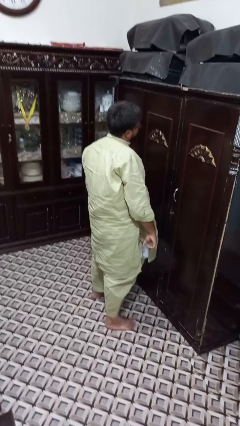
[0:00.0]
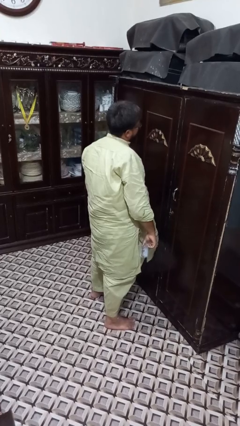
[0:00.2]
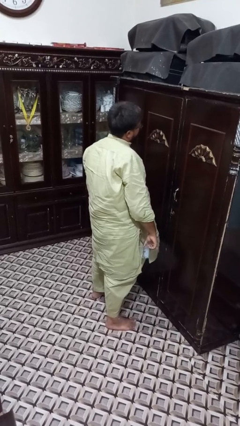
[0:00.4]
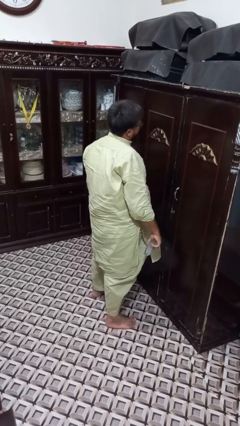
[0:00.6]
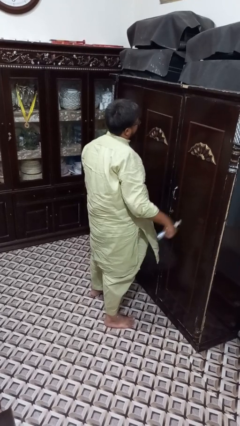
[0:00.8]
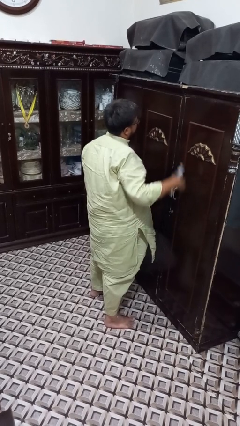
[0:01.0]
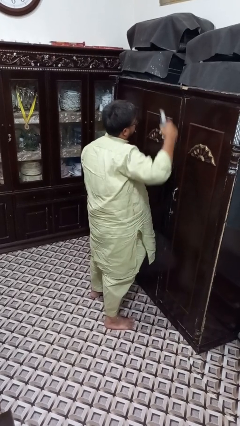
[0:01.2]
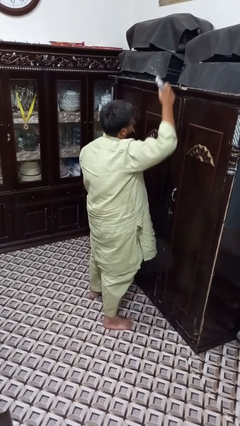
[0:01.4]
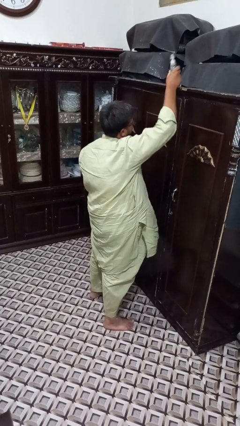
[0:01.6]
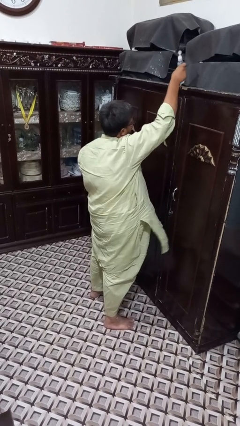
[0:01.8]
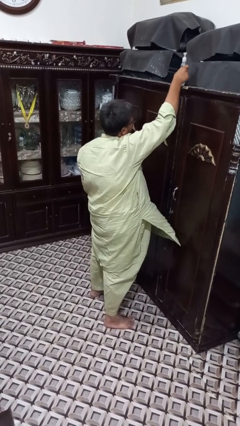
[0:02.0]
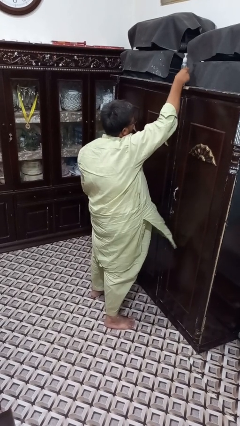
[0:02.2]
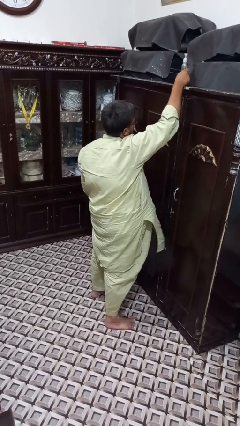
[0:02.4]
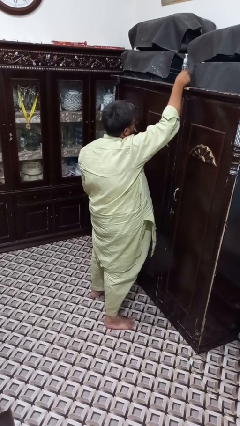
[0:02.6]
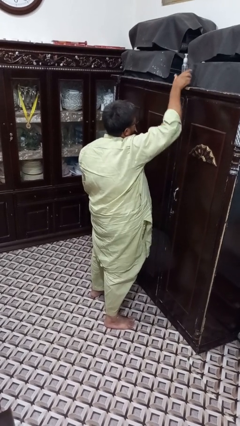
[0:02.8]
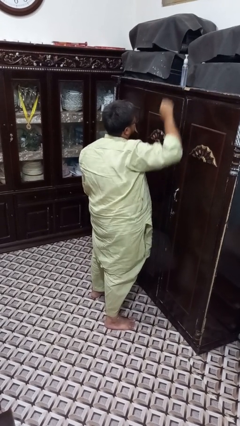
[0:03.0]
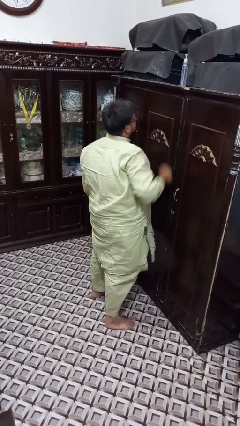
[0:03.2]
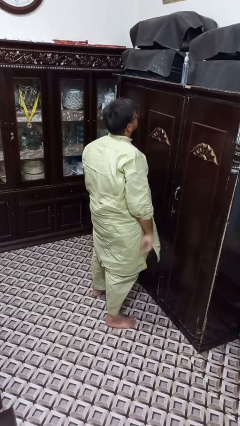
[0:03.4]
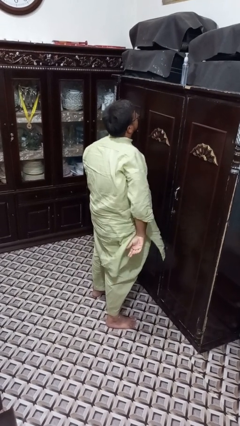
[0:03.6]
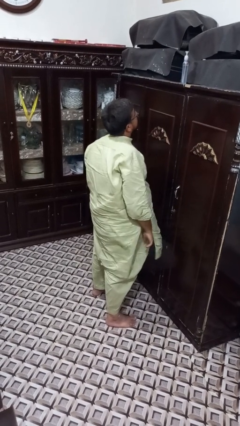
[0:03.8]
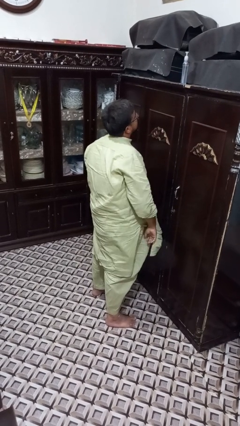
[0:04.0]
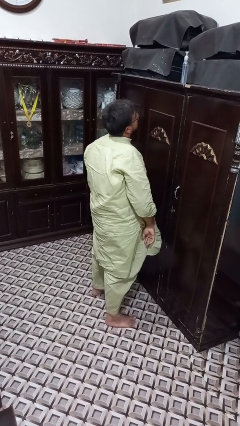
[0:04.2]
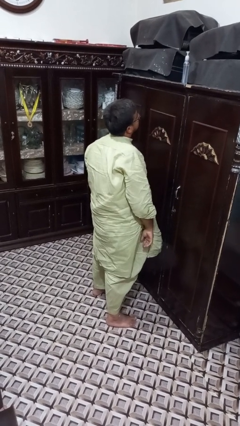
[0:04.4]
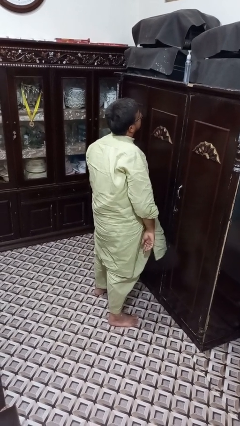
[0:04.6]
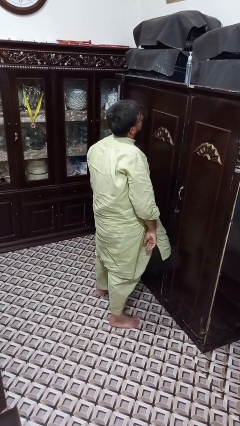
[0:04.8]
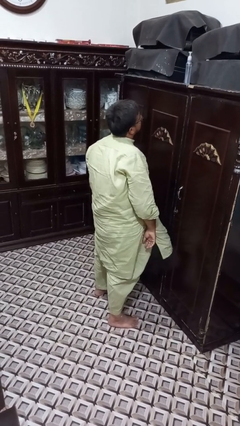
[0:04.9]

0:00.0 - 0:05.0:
person puts down object on shelf

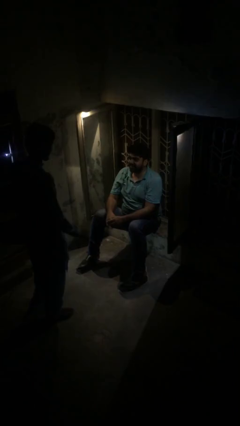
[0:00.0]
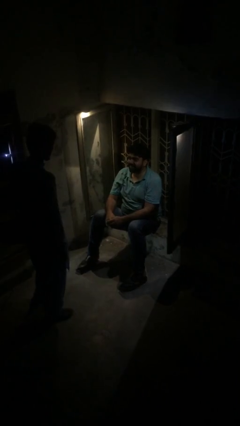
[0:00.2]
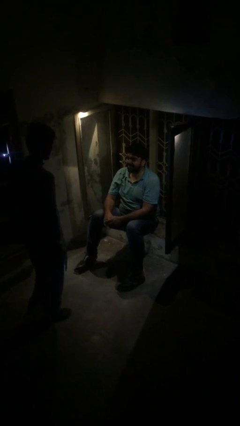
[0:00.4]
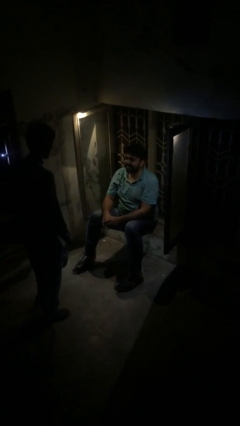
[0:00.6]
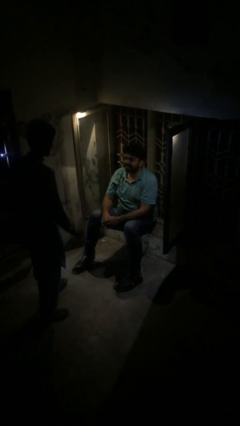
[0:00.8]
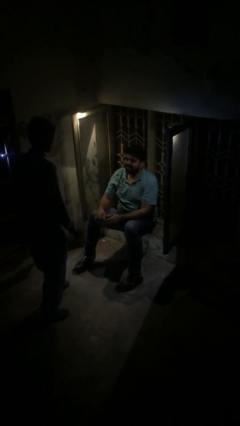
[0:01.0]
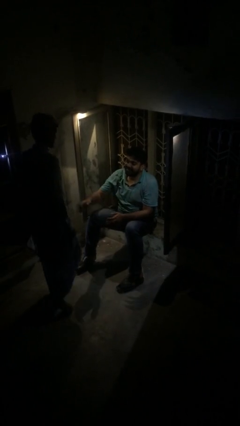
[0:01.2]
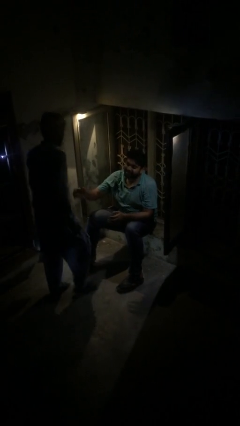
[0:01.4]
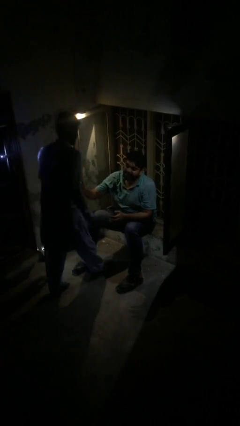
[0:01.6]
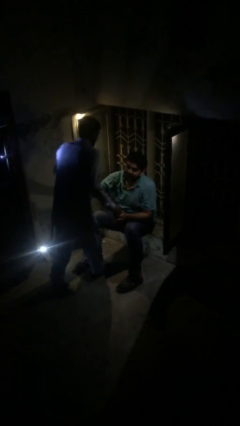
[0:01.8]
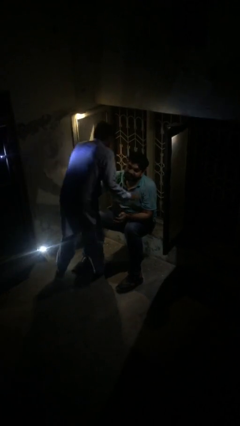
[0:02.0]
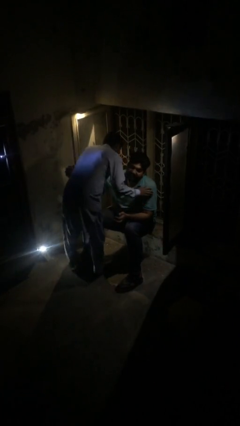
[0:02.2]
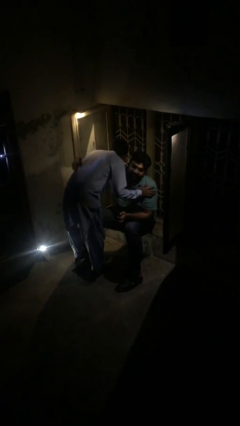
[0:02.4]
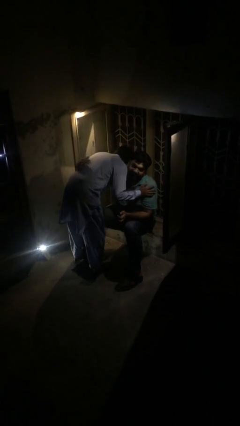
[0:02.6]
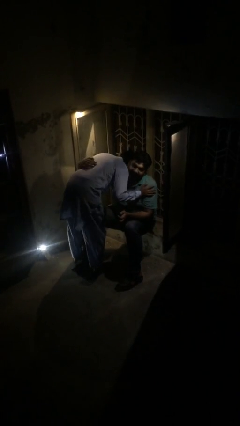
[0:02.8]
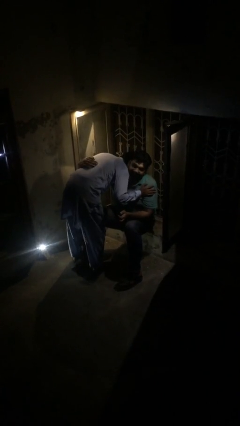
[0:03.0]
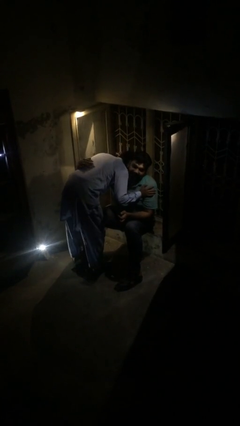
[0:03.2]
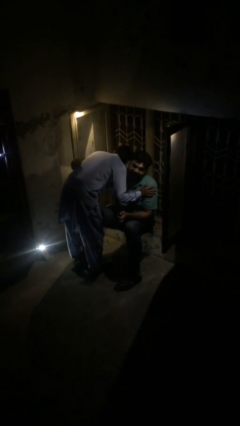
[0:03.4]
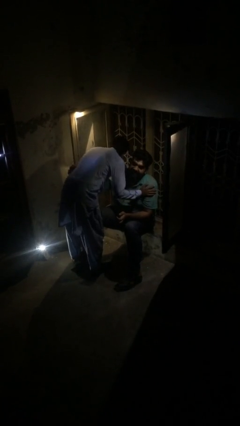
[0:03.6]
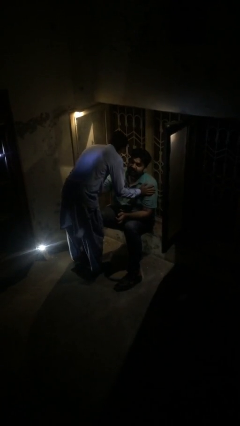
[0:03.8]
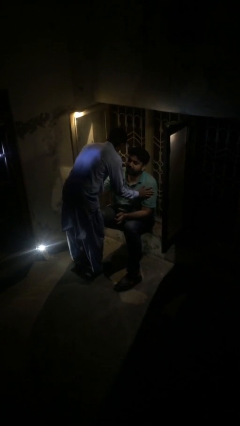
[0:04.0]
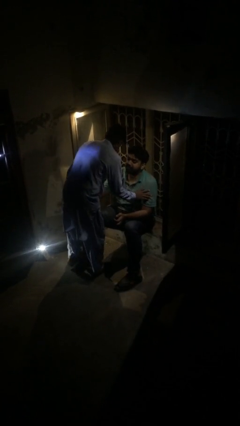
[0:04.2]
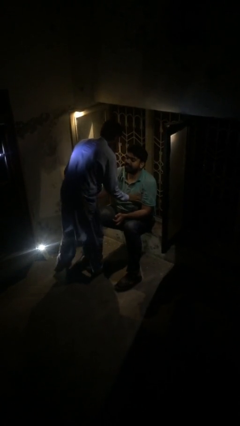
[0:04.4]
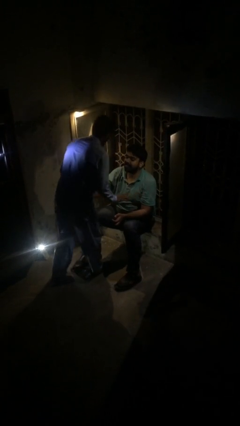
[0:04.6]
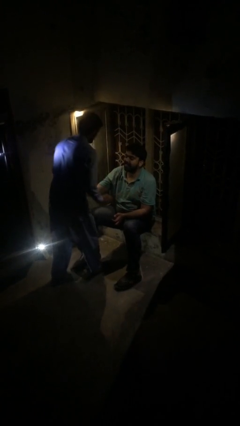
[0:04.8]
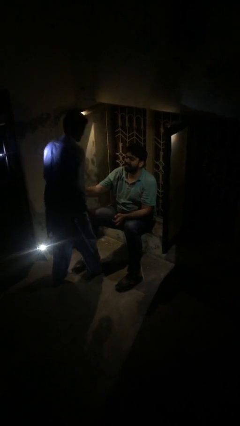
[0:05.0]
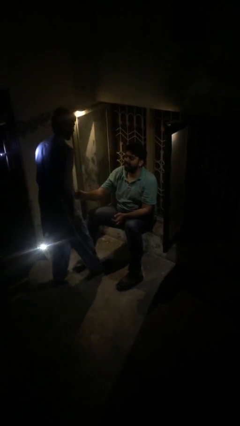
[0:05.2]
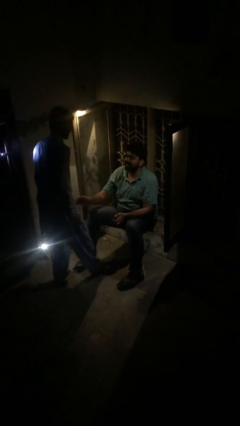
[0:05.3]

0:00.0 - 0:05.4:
person embraces person

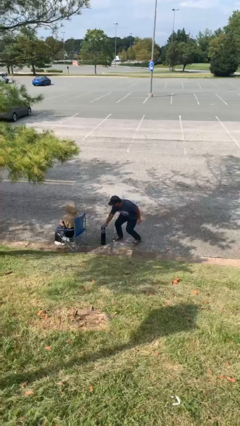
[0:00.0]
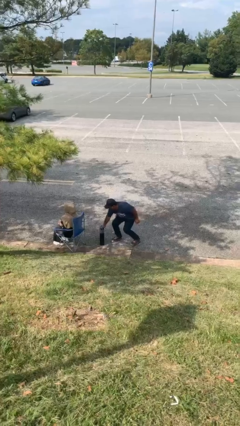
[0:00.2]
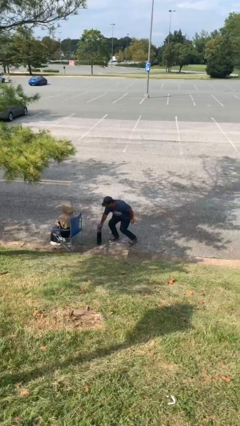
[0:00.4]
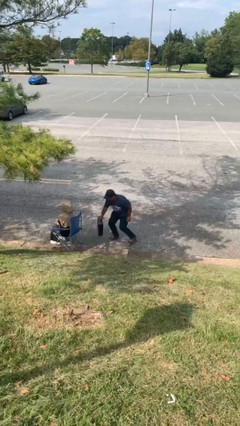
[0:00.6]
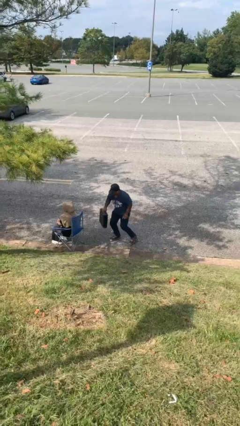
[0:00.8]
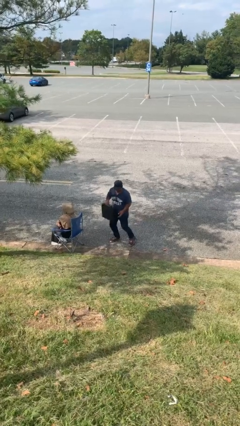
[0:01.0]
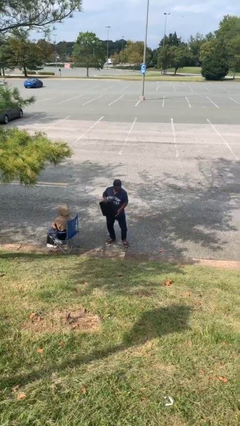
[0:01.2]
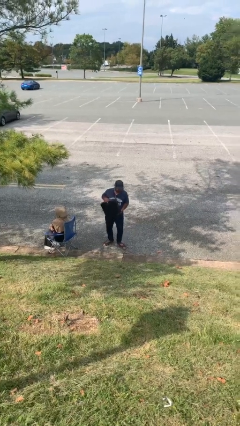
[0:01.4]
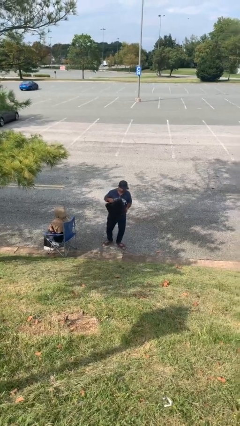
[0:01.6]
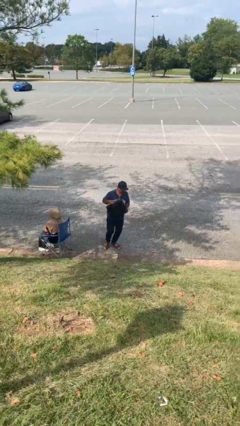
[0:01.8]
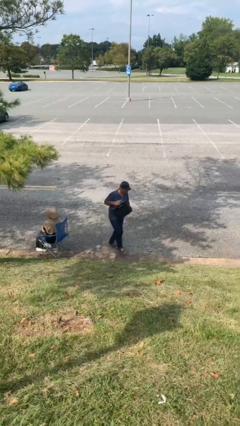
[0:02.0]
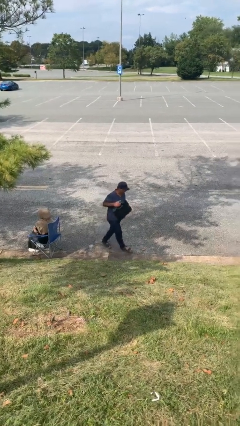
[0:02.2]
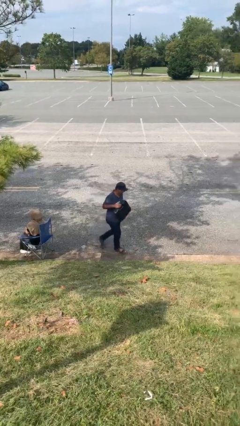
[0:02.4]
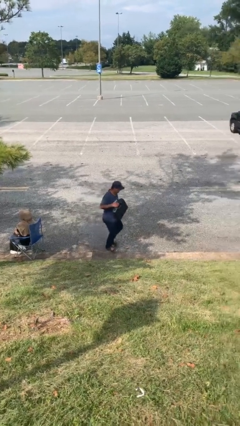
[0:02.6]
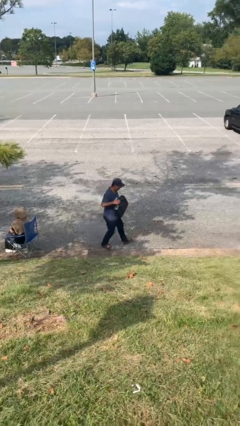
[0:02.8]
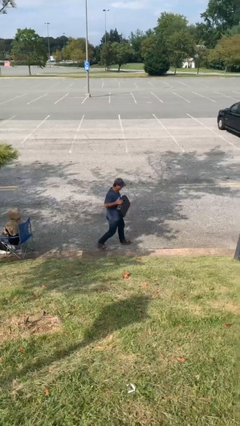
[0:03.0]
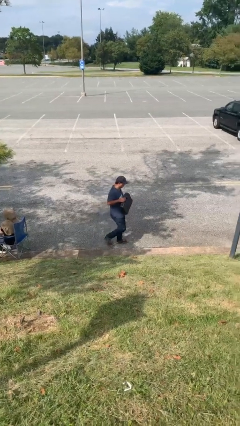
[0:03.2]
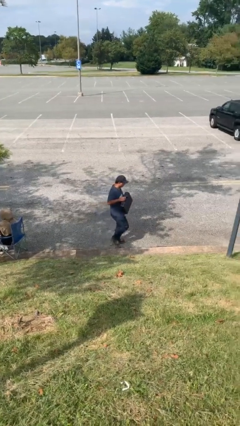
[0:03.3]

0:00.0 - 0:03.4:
person steals object from person

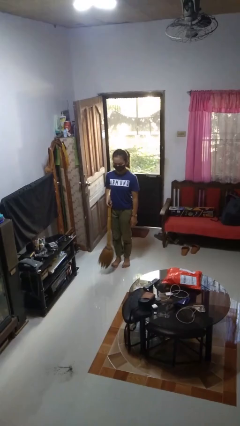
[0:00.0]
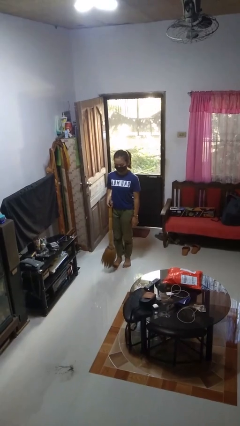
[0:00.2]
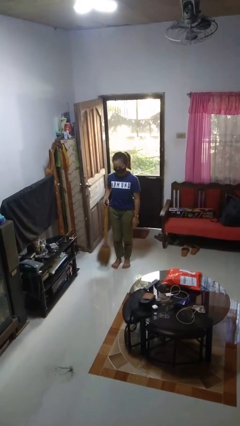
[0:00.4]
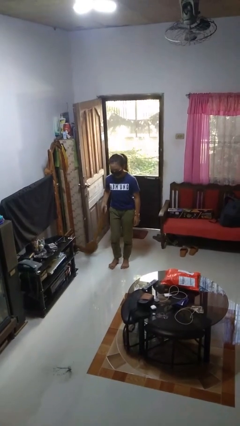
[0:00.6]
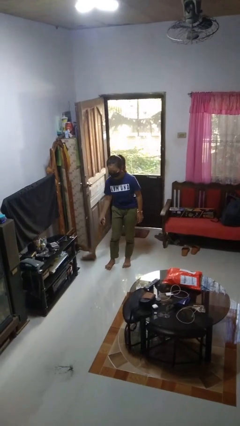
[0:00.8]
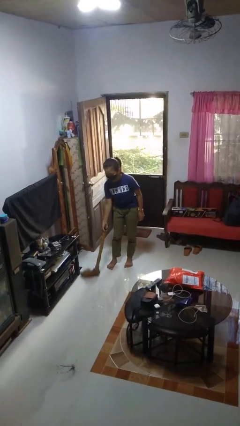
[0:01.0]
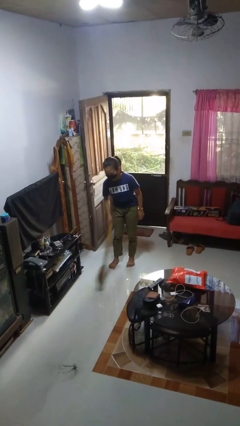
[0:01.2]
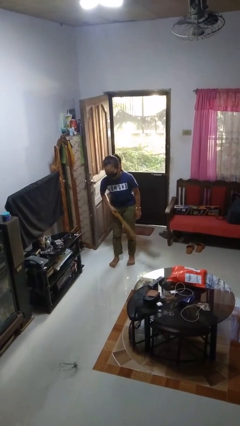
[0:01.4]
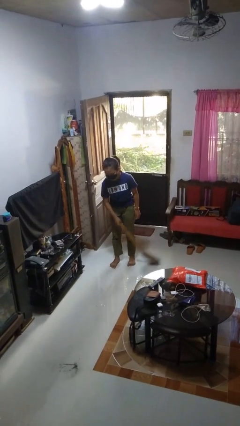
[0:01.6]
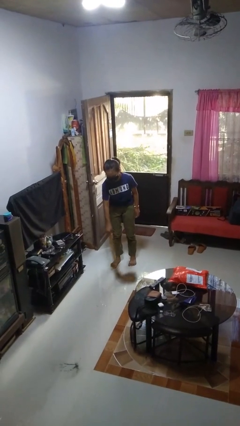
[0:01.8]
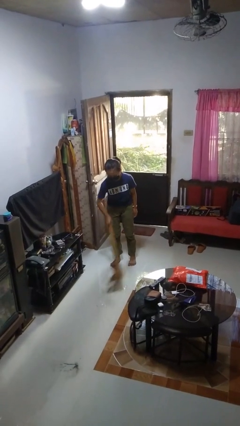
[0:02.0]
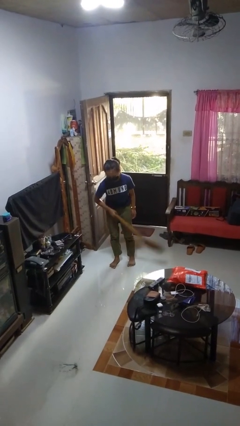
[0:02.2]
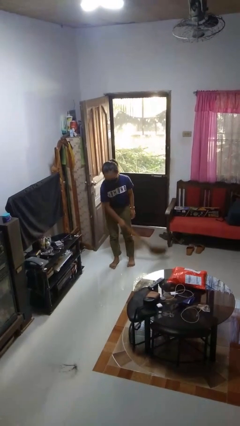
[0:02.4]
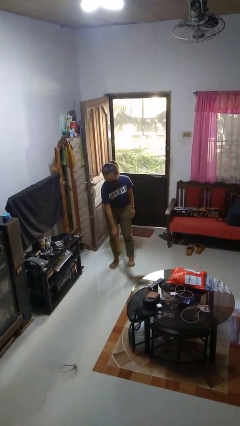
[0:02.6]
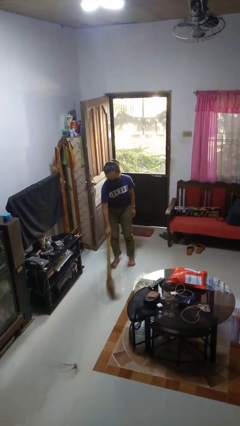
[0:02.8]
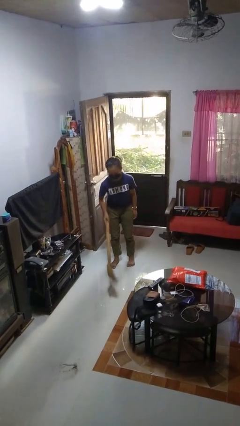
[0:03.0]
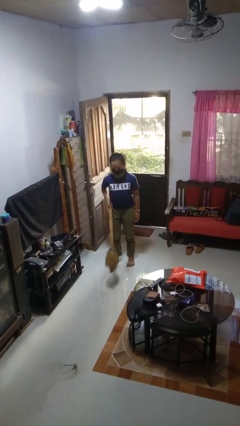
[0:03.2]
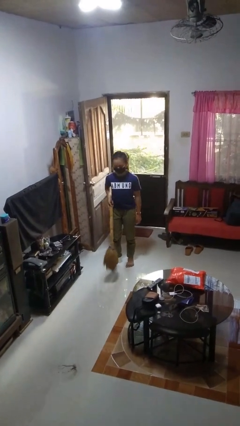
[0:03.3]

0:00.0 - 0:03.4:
person sweeps floor

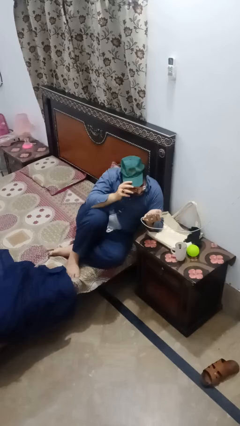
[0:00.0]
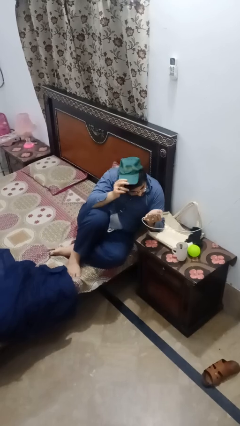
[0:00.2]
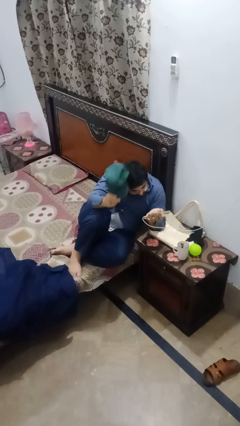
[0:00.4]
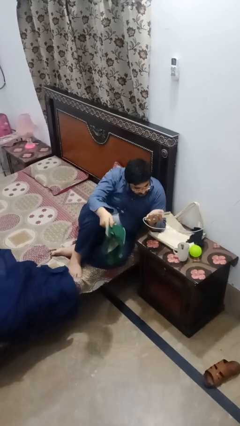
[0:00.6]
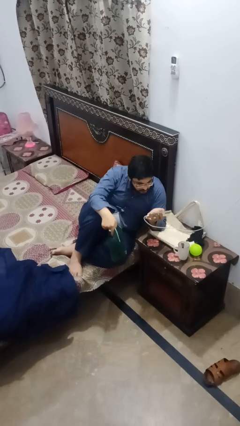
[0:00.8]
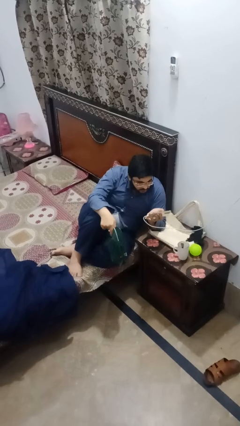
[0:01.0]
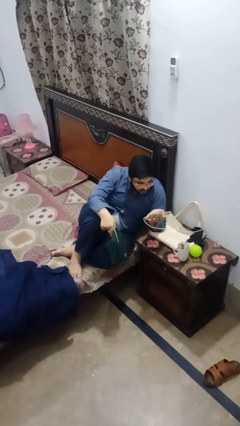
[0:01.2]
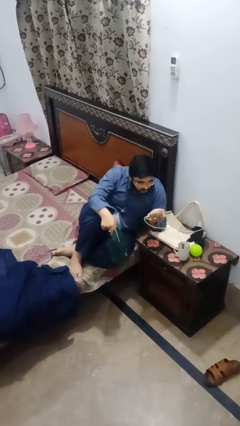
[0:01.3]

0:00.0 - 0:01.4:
person takes off hat
